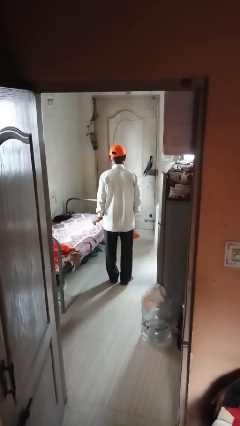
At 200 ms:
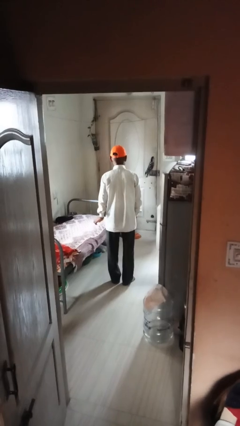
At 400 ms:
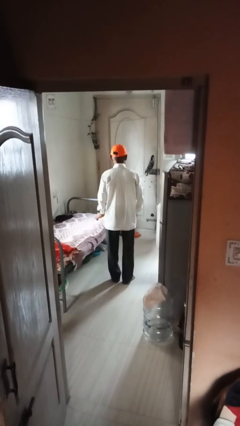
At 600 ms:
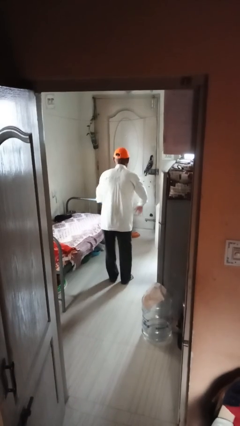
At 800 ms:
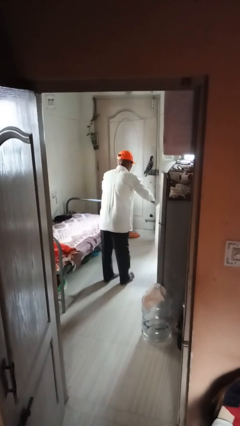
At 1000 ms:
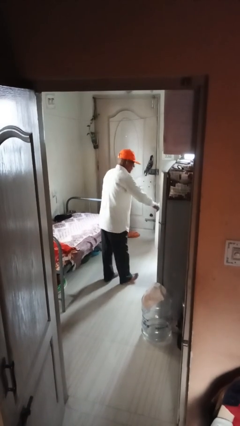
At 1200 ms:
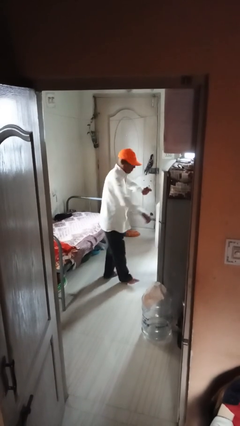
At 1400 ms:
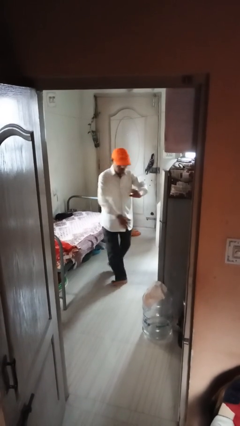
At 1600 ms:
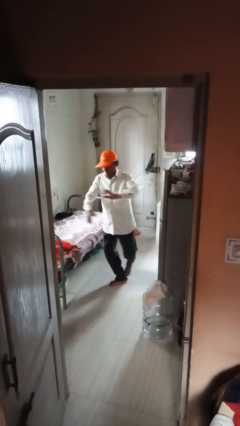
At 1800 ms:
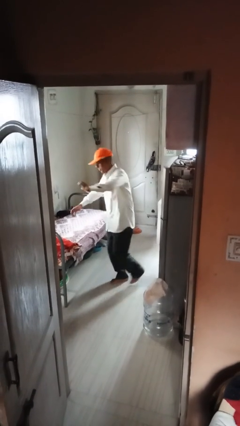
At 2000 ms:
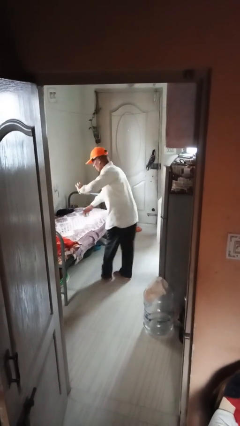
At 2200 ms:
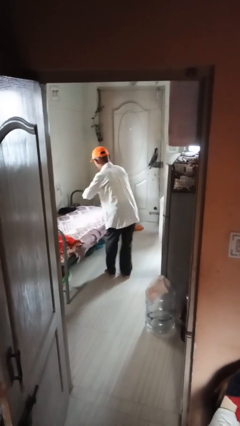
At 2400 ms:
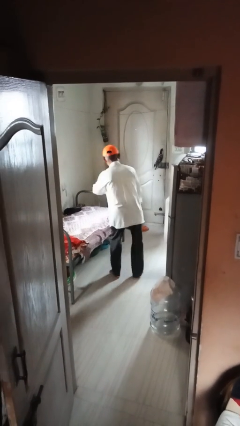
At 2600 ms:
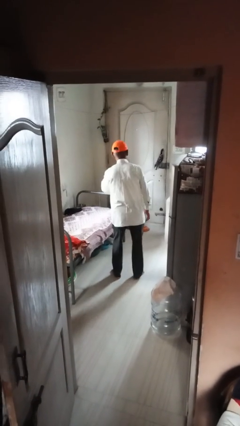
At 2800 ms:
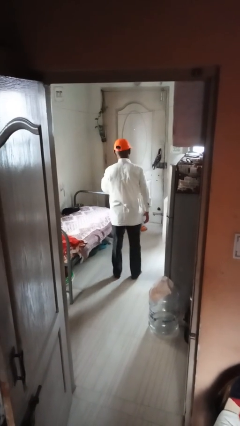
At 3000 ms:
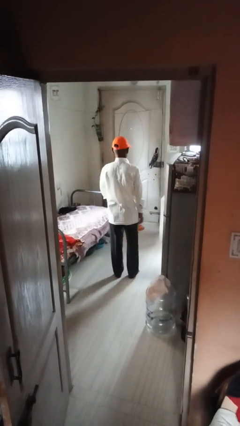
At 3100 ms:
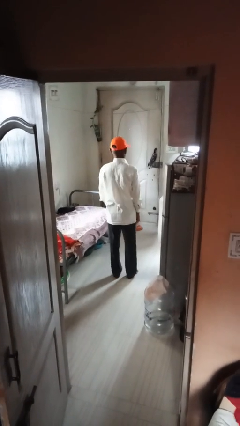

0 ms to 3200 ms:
person twirls

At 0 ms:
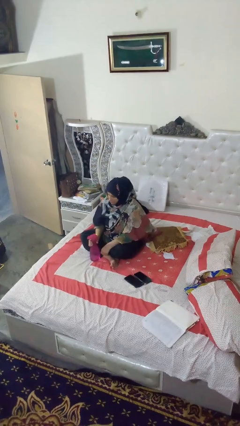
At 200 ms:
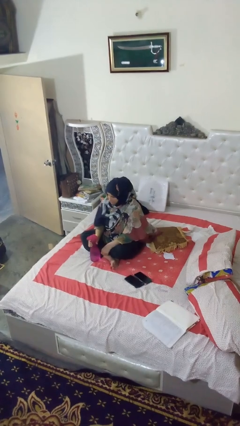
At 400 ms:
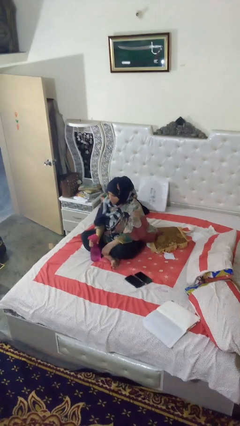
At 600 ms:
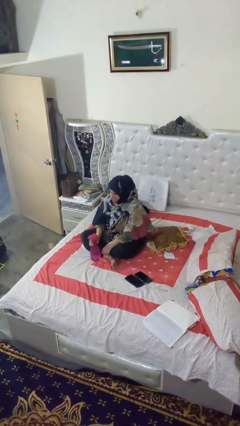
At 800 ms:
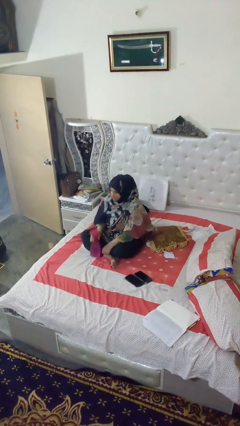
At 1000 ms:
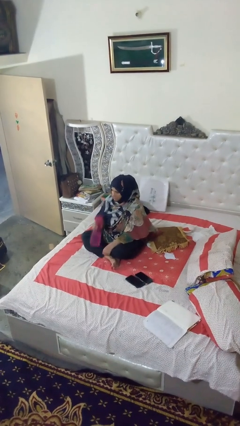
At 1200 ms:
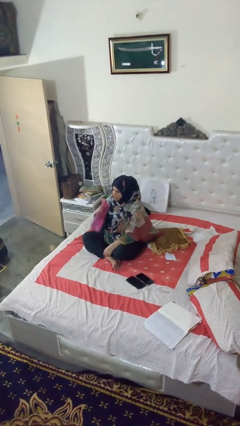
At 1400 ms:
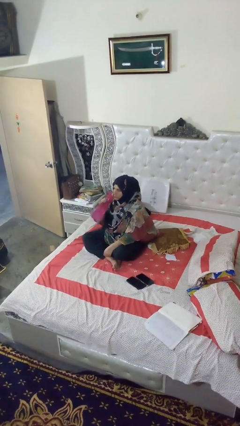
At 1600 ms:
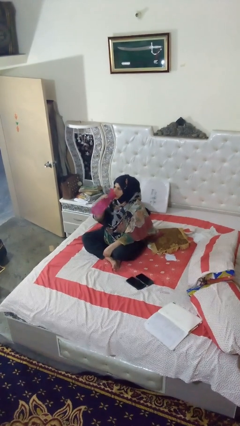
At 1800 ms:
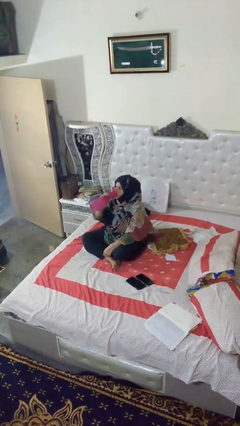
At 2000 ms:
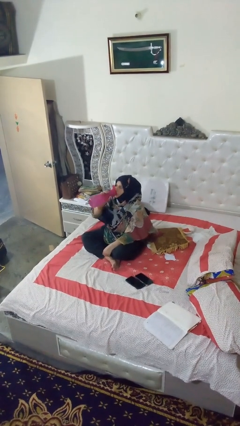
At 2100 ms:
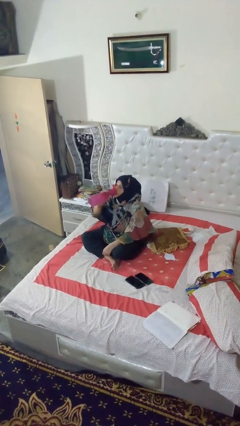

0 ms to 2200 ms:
person drinks from bottle

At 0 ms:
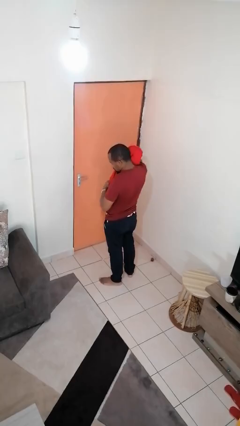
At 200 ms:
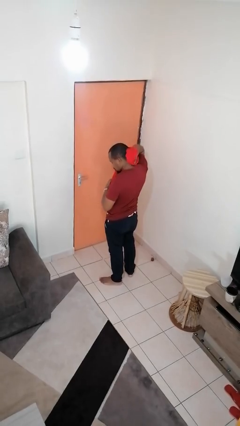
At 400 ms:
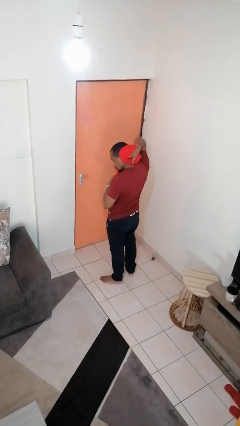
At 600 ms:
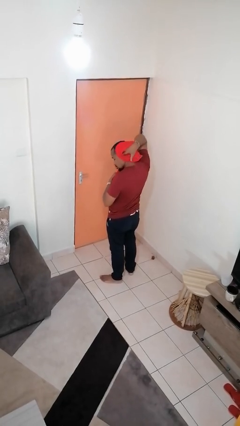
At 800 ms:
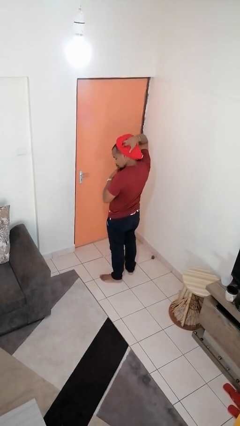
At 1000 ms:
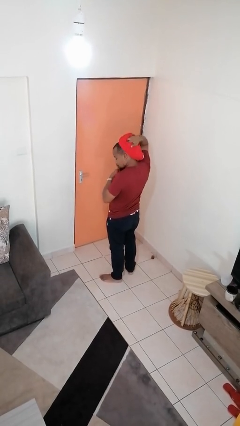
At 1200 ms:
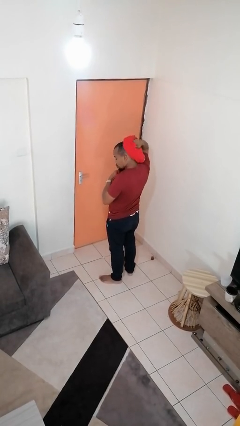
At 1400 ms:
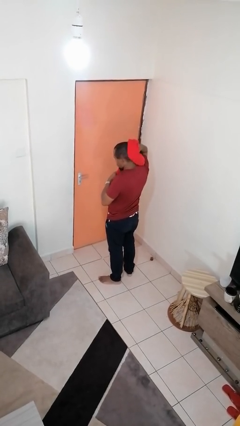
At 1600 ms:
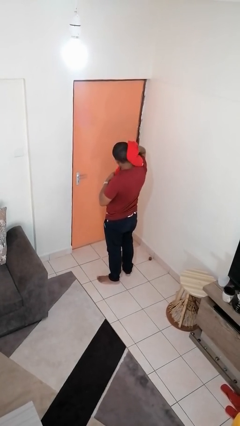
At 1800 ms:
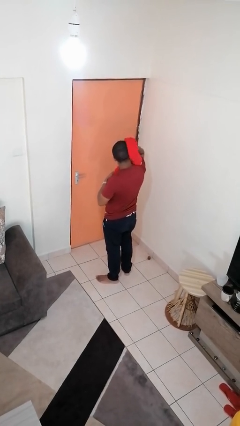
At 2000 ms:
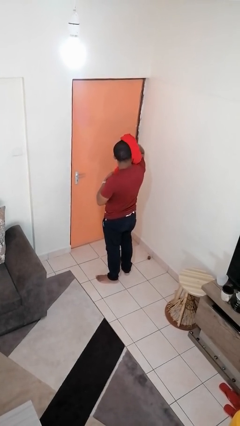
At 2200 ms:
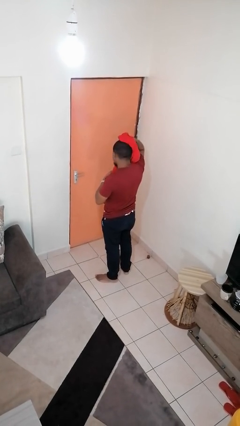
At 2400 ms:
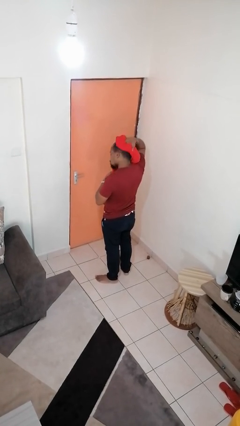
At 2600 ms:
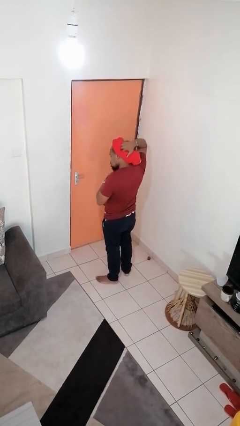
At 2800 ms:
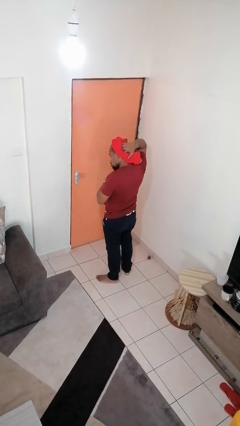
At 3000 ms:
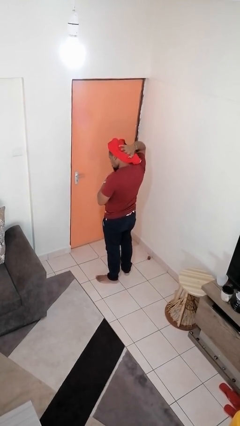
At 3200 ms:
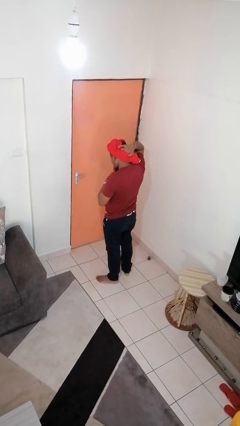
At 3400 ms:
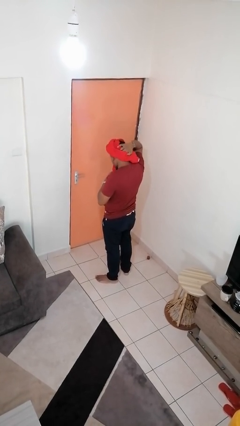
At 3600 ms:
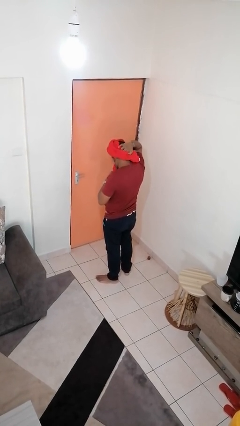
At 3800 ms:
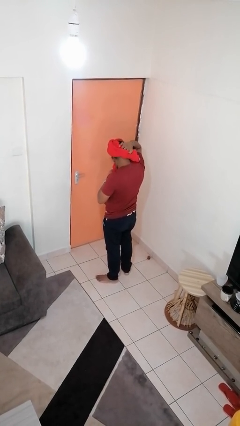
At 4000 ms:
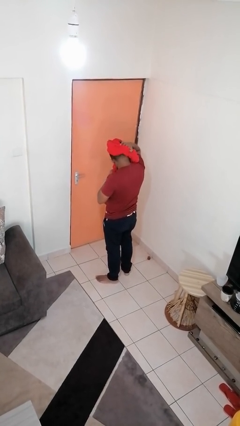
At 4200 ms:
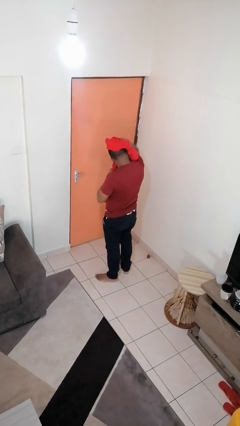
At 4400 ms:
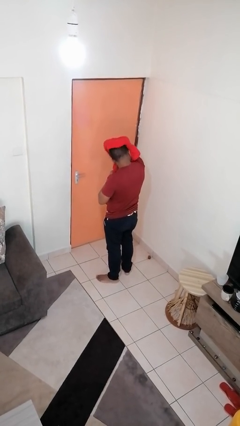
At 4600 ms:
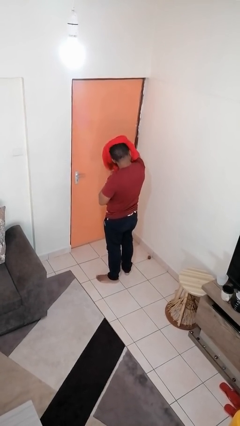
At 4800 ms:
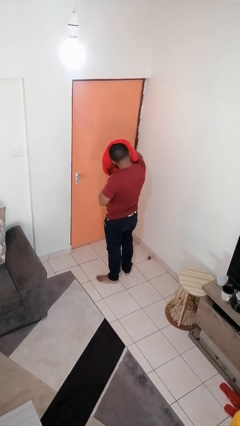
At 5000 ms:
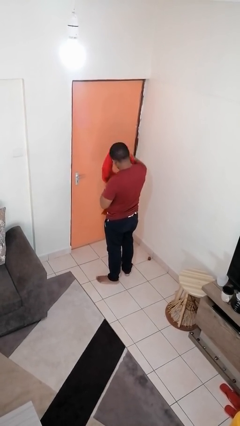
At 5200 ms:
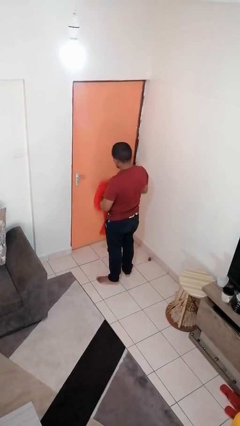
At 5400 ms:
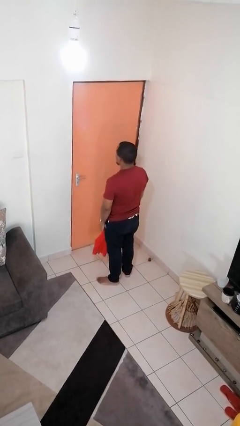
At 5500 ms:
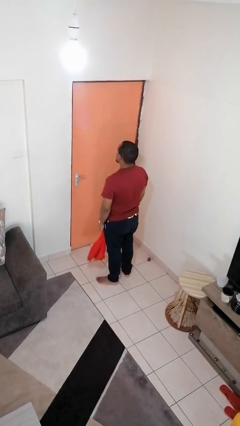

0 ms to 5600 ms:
person dries hair with towel

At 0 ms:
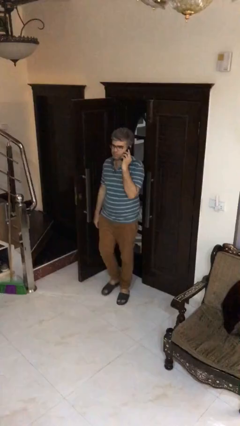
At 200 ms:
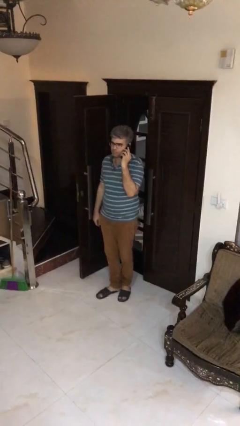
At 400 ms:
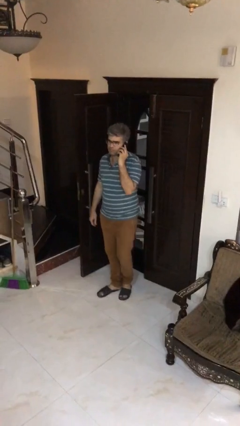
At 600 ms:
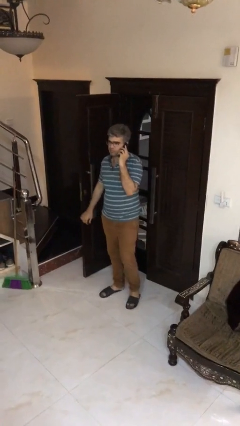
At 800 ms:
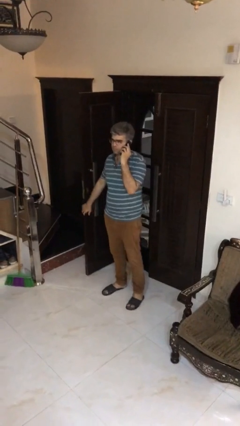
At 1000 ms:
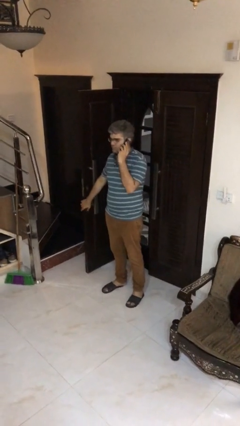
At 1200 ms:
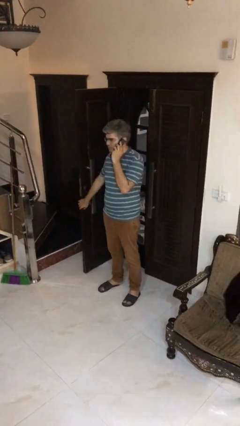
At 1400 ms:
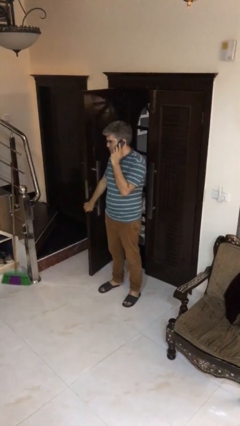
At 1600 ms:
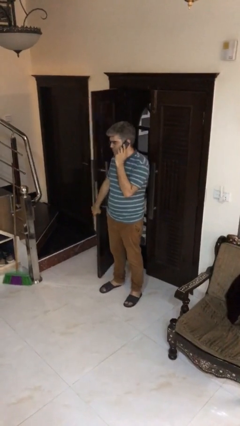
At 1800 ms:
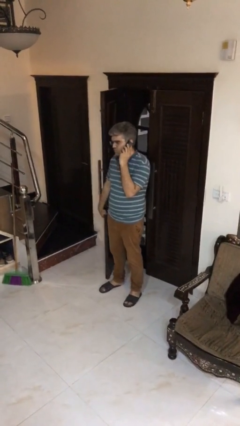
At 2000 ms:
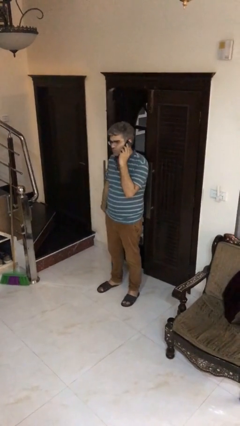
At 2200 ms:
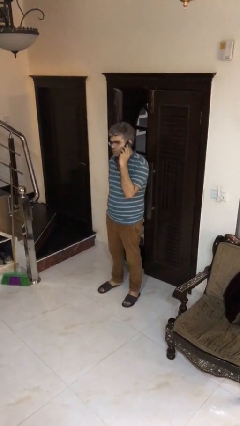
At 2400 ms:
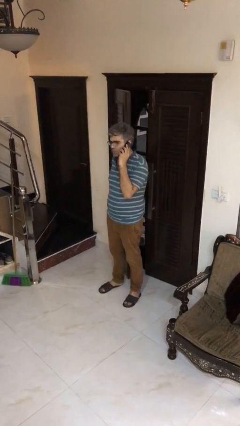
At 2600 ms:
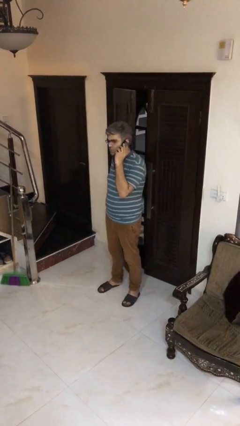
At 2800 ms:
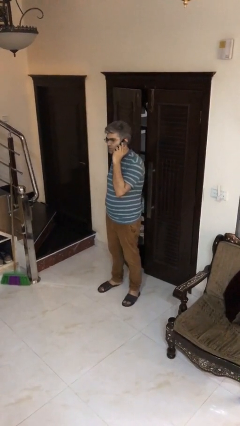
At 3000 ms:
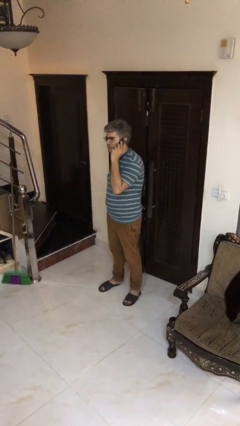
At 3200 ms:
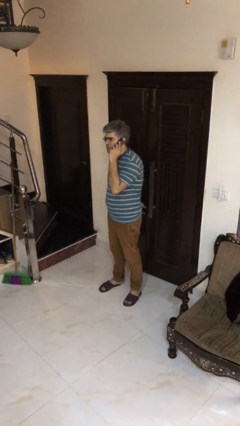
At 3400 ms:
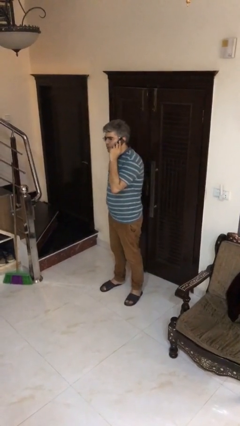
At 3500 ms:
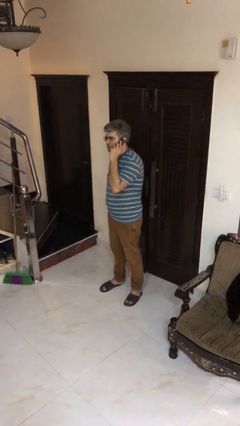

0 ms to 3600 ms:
person closes facility door

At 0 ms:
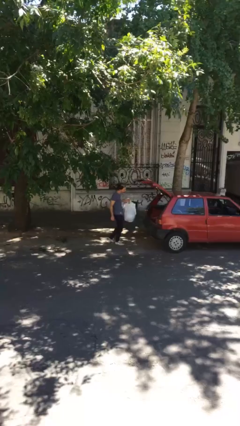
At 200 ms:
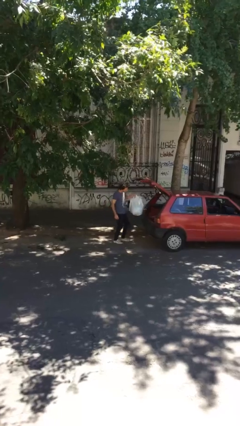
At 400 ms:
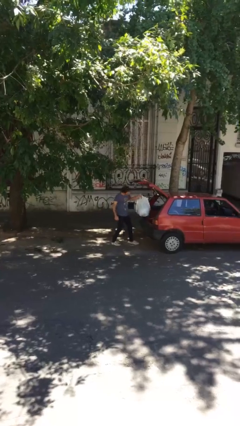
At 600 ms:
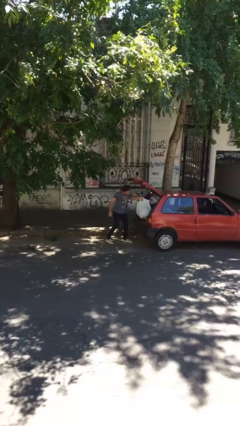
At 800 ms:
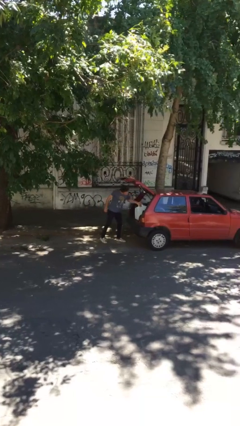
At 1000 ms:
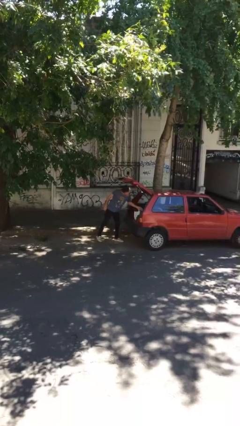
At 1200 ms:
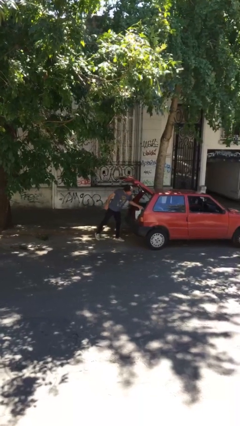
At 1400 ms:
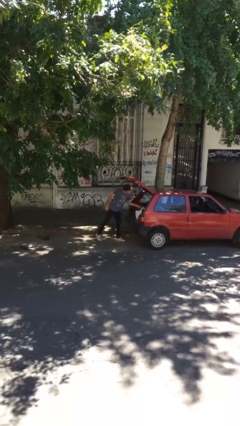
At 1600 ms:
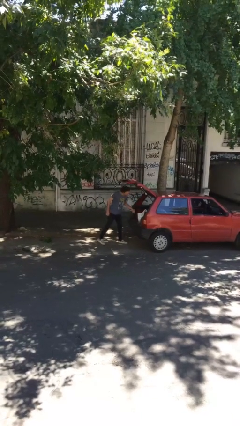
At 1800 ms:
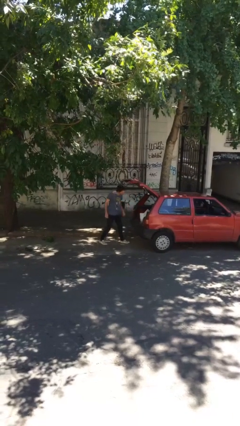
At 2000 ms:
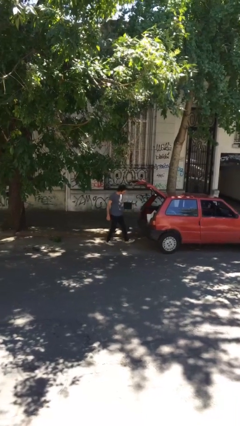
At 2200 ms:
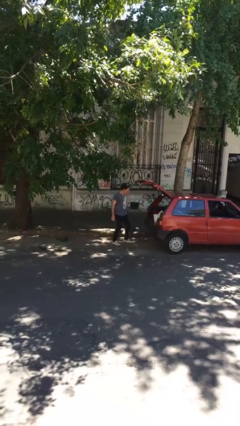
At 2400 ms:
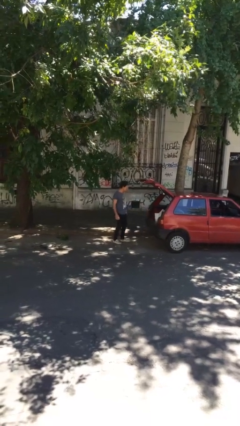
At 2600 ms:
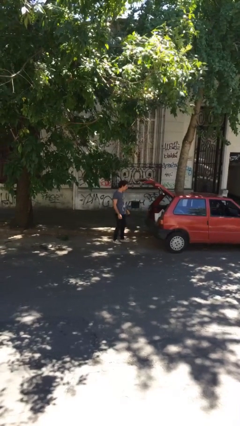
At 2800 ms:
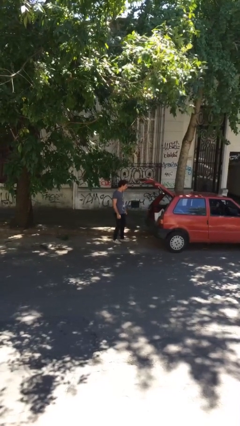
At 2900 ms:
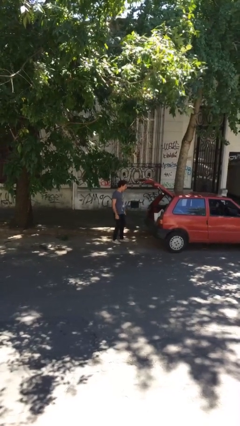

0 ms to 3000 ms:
person loads car
